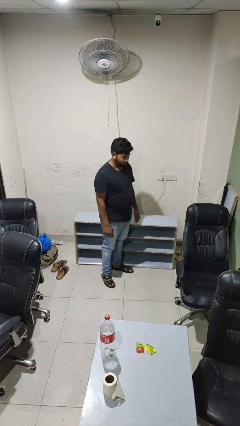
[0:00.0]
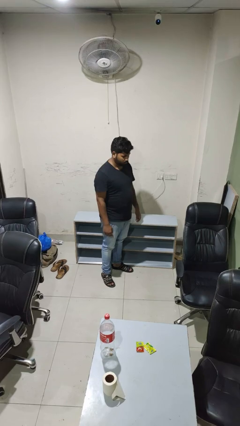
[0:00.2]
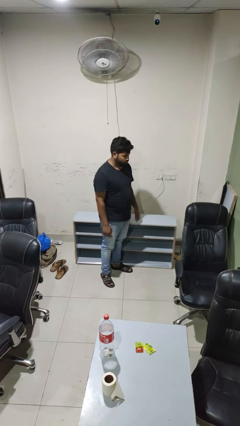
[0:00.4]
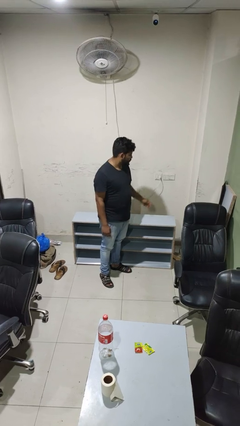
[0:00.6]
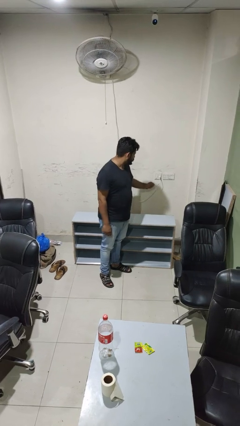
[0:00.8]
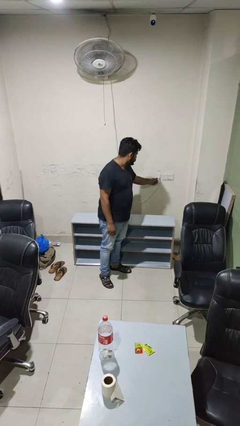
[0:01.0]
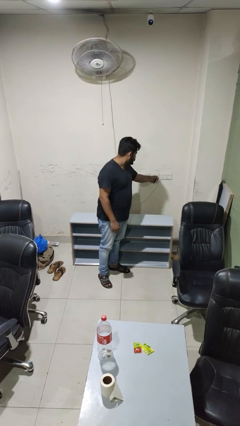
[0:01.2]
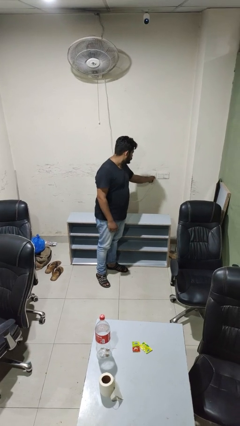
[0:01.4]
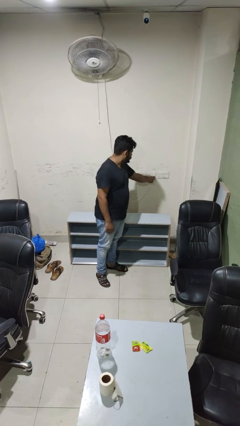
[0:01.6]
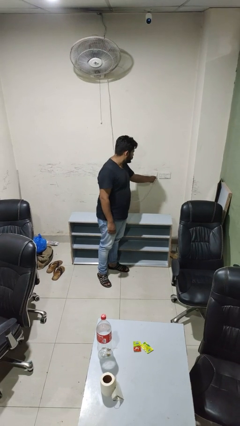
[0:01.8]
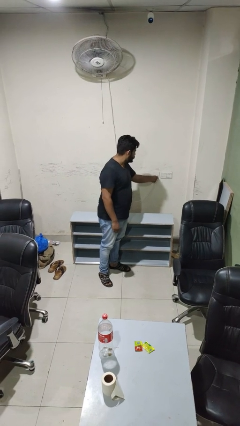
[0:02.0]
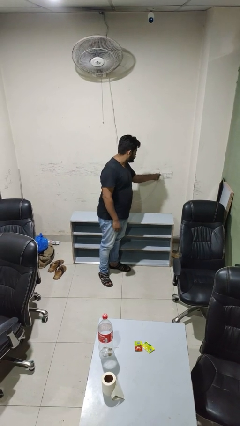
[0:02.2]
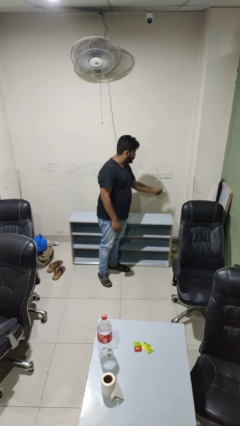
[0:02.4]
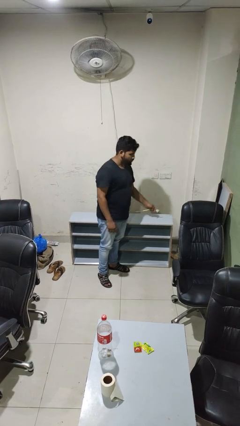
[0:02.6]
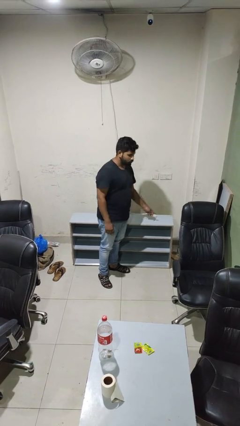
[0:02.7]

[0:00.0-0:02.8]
person unplugs from electrical socket

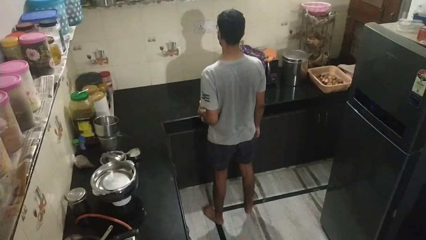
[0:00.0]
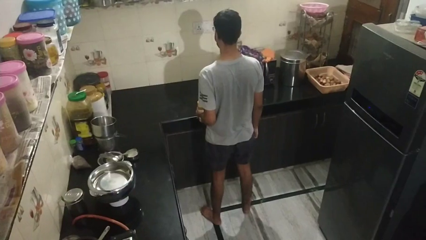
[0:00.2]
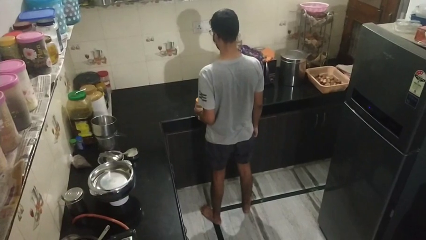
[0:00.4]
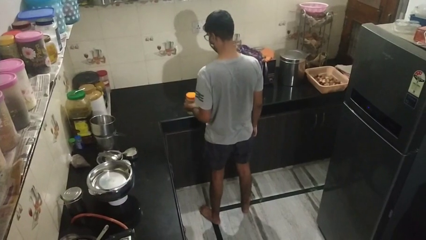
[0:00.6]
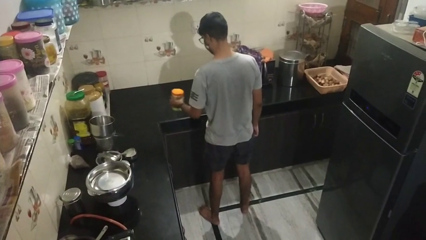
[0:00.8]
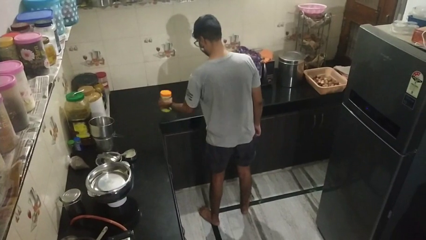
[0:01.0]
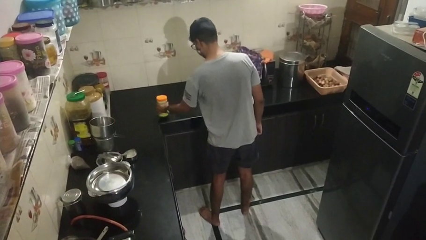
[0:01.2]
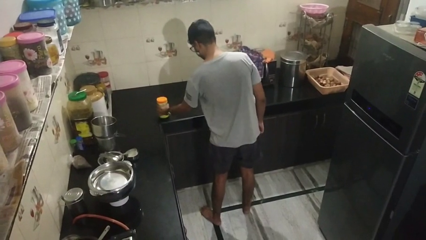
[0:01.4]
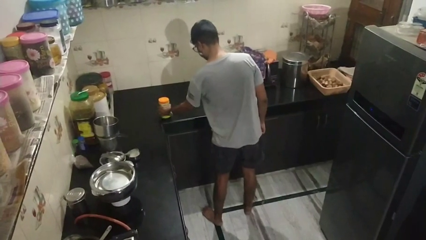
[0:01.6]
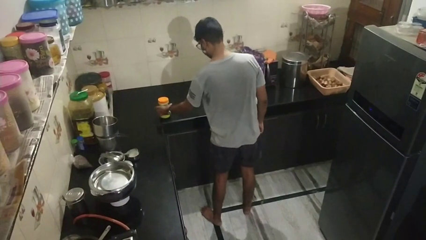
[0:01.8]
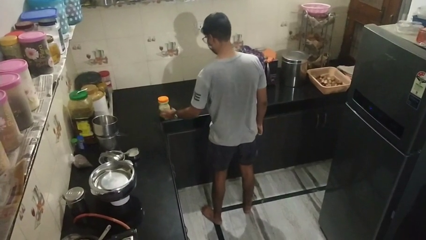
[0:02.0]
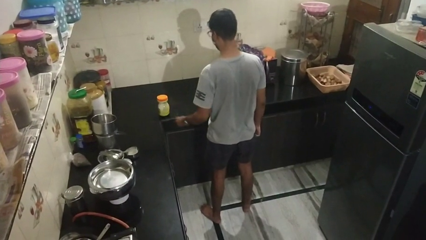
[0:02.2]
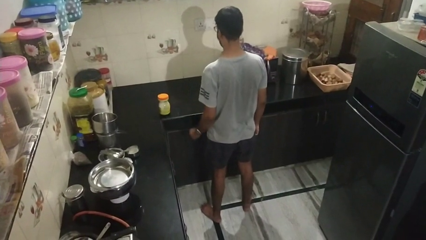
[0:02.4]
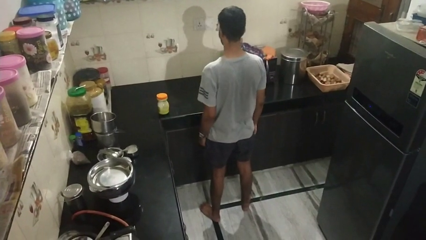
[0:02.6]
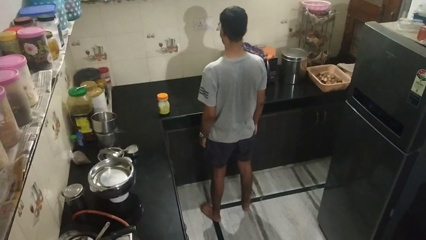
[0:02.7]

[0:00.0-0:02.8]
person puts down object on countertop

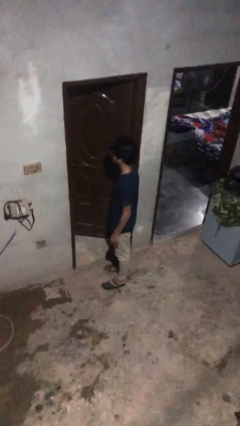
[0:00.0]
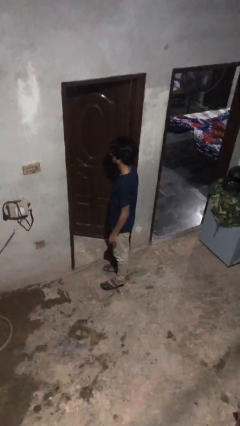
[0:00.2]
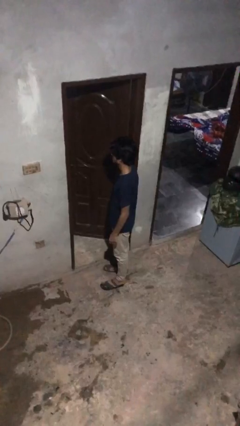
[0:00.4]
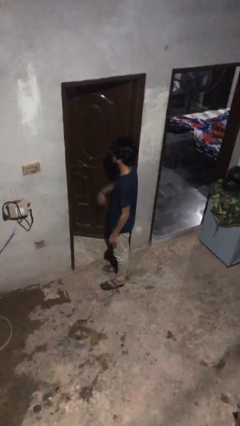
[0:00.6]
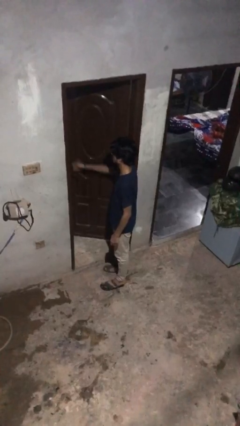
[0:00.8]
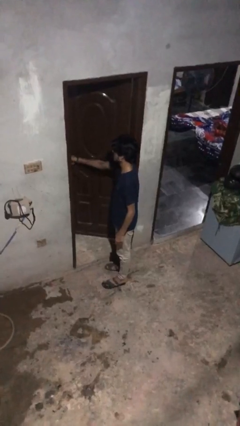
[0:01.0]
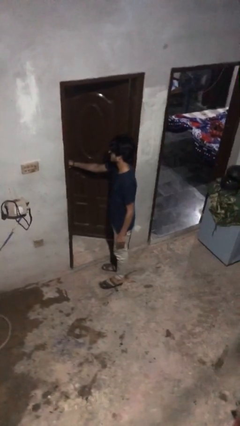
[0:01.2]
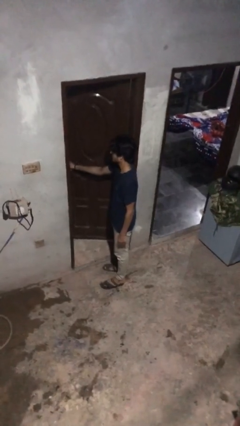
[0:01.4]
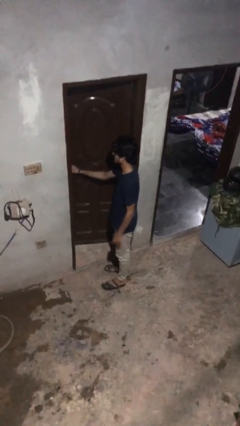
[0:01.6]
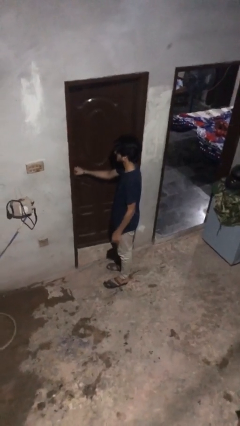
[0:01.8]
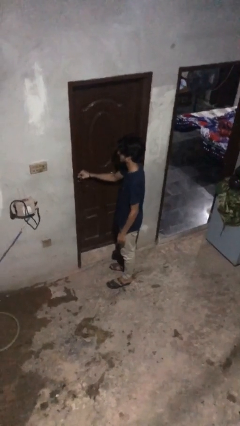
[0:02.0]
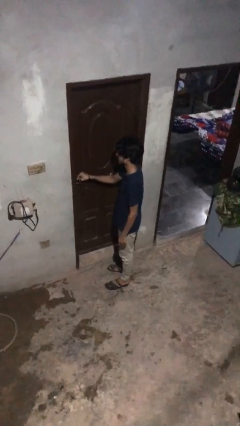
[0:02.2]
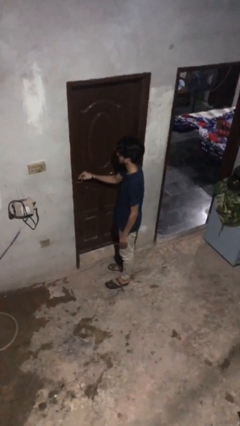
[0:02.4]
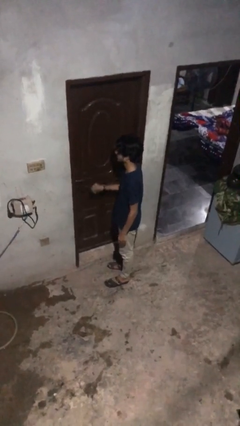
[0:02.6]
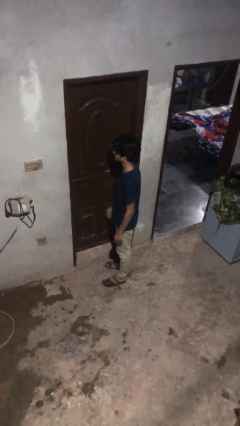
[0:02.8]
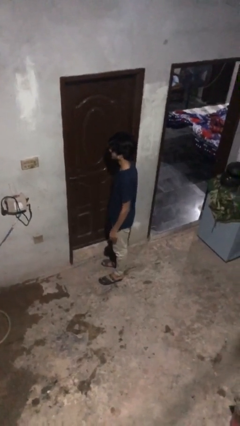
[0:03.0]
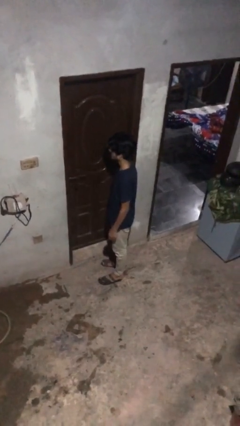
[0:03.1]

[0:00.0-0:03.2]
person closes facility door

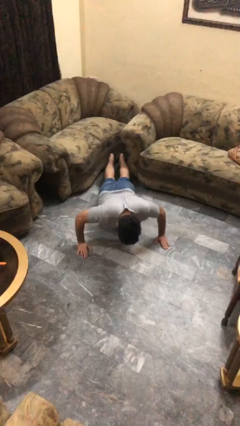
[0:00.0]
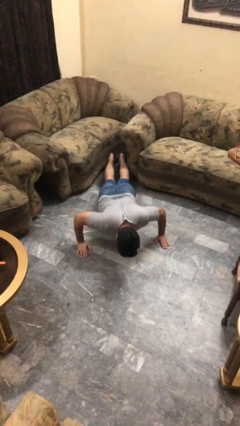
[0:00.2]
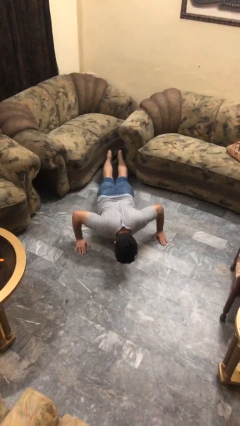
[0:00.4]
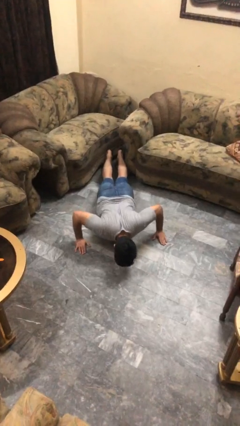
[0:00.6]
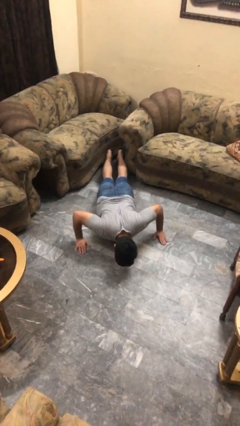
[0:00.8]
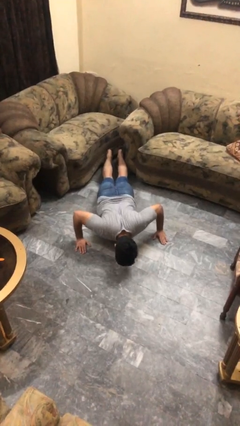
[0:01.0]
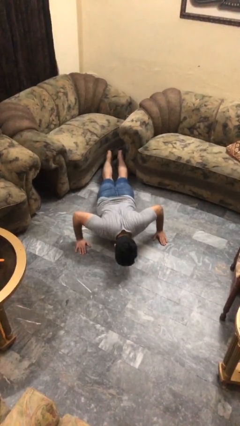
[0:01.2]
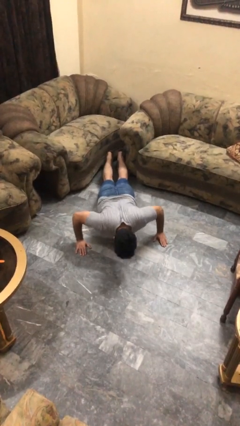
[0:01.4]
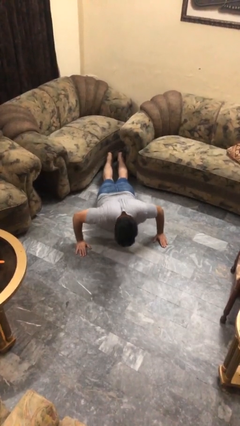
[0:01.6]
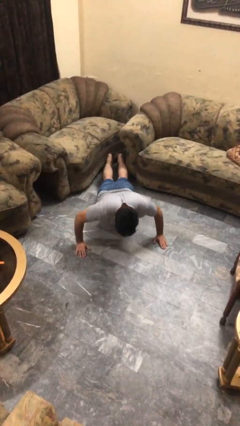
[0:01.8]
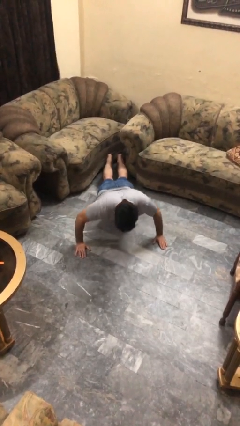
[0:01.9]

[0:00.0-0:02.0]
person exercises with pushup

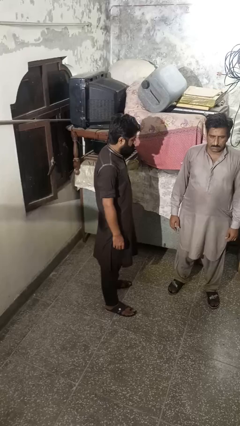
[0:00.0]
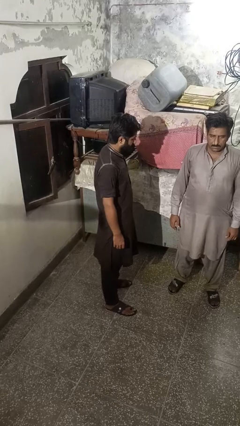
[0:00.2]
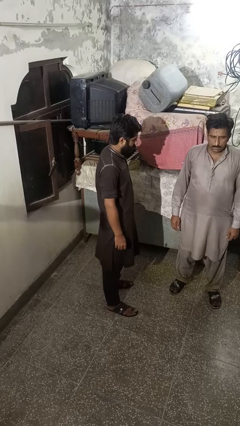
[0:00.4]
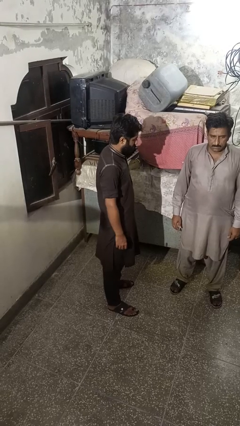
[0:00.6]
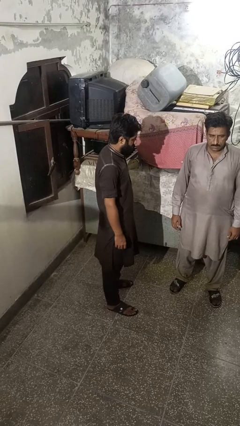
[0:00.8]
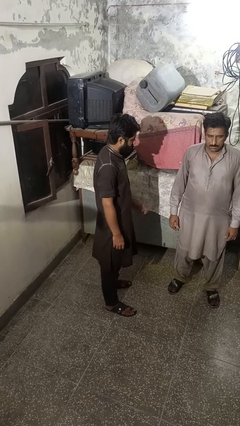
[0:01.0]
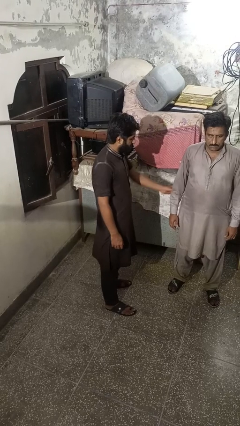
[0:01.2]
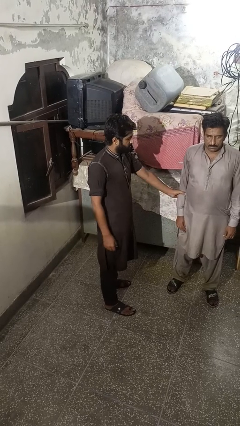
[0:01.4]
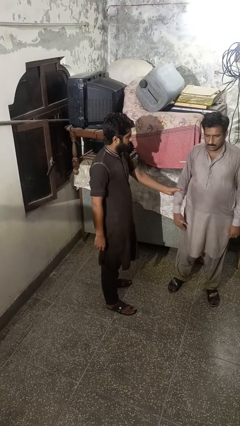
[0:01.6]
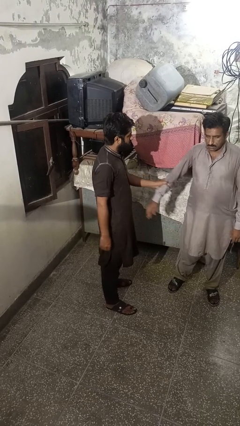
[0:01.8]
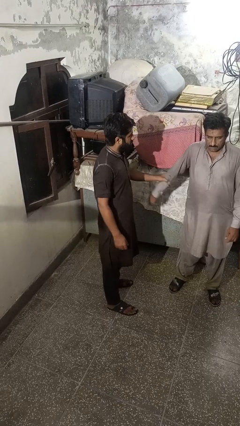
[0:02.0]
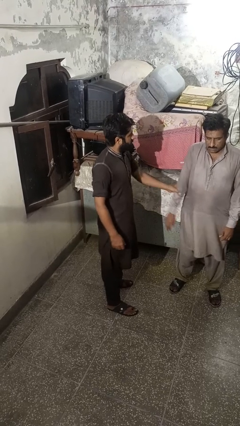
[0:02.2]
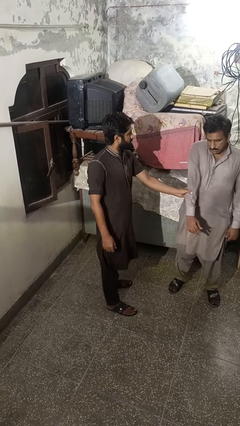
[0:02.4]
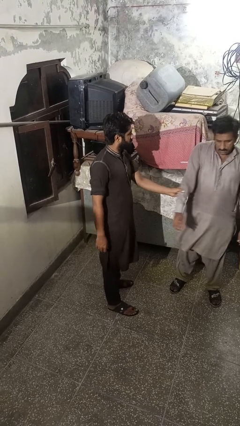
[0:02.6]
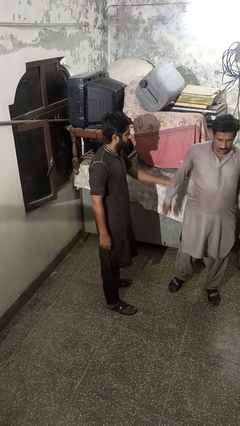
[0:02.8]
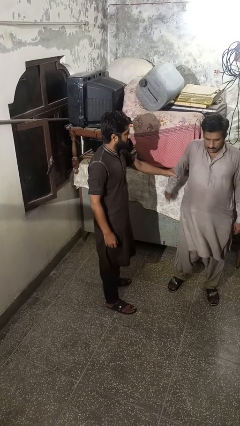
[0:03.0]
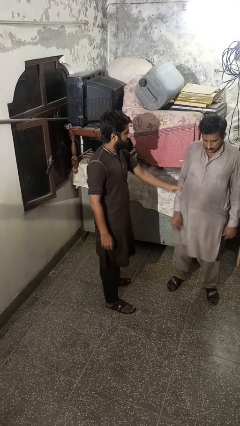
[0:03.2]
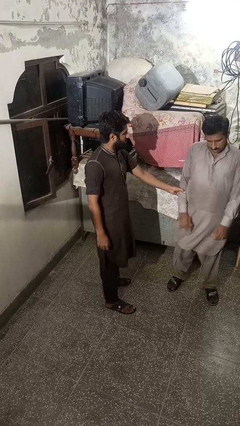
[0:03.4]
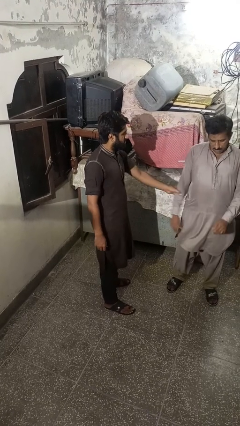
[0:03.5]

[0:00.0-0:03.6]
person grabs person by forearm

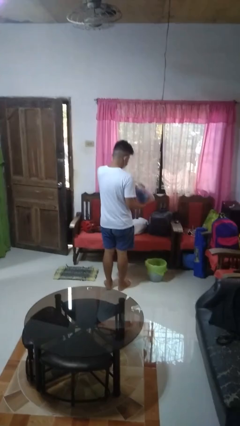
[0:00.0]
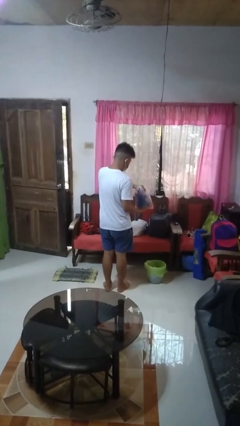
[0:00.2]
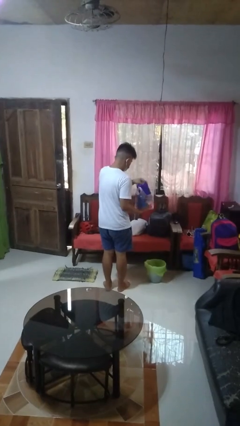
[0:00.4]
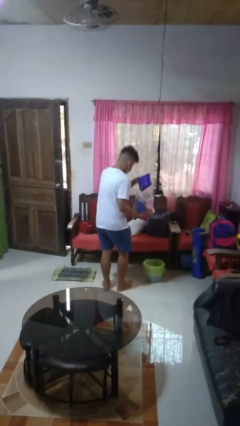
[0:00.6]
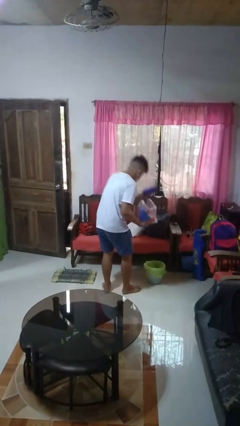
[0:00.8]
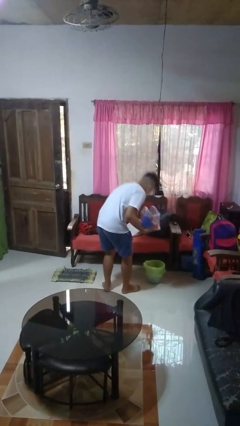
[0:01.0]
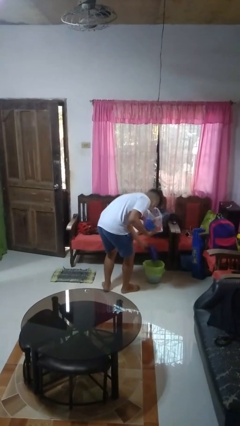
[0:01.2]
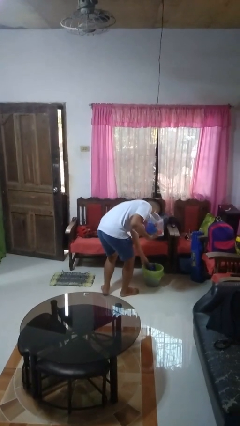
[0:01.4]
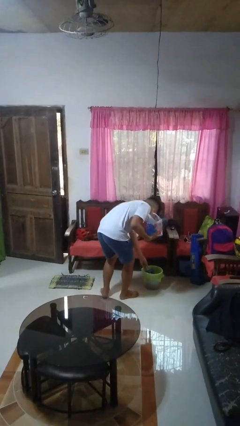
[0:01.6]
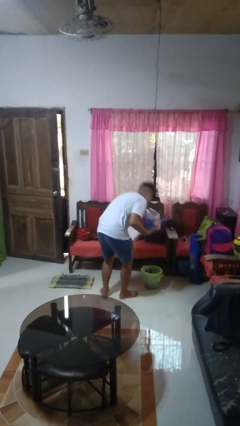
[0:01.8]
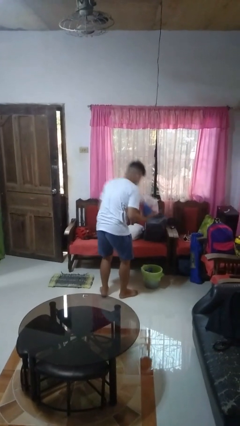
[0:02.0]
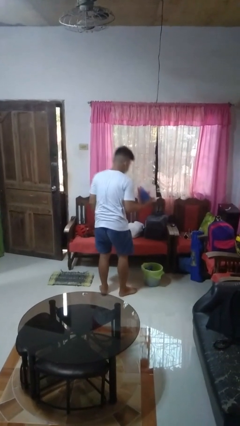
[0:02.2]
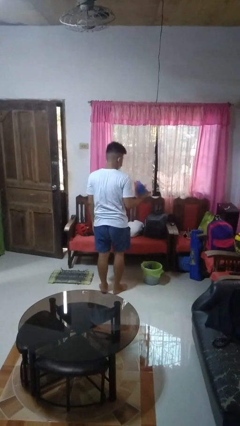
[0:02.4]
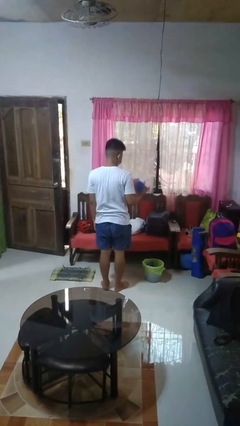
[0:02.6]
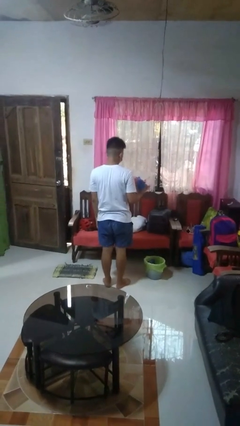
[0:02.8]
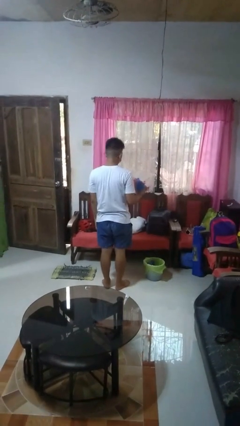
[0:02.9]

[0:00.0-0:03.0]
person discards trash

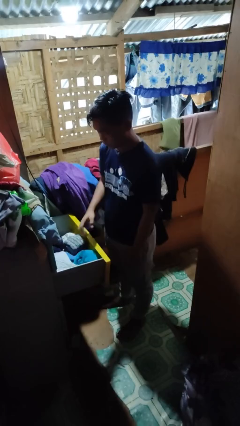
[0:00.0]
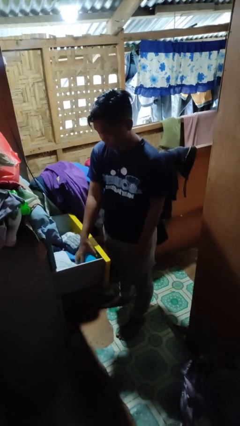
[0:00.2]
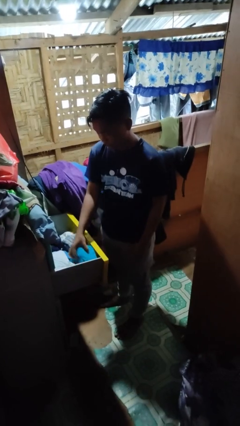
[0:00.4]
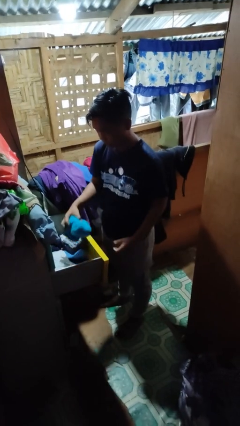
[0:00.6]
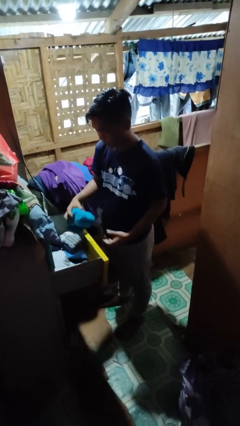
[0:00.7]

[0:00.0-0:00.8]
person takes clothes from dresser
